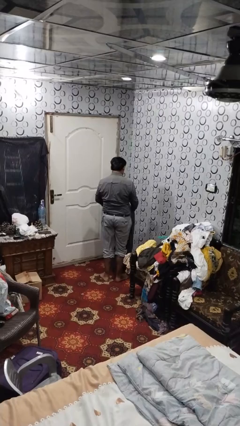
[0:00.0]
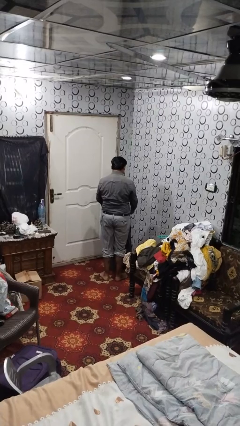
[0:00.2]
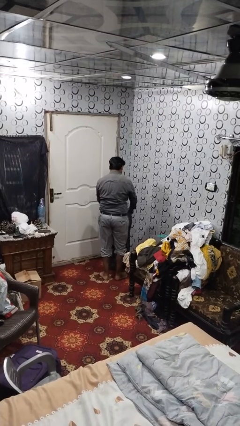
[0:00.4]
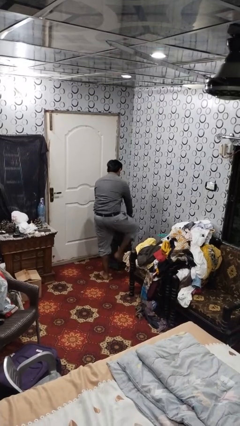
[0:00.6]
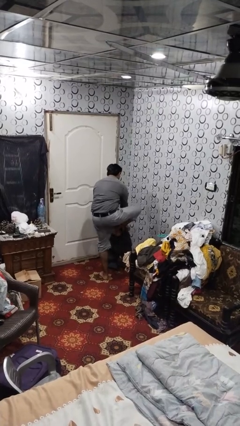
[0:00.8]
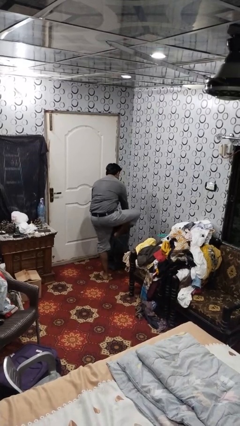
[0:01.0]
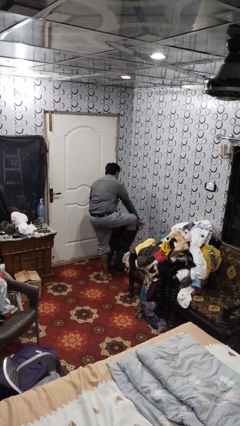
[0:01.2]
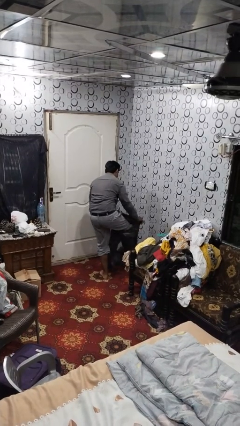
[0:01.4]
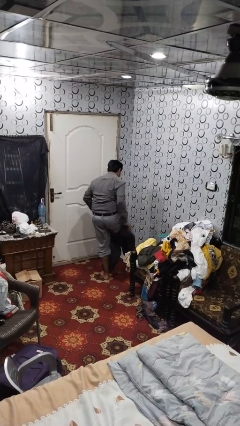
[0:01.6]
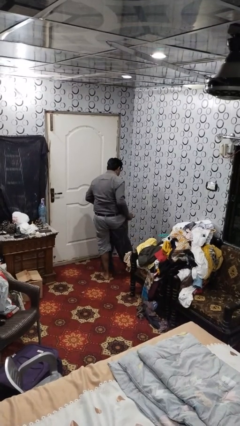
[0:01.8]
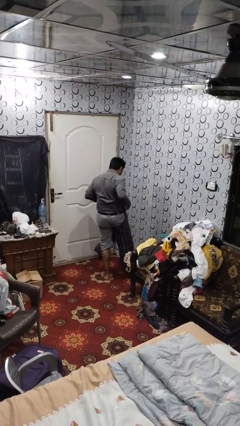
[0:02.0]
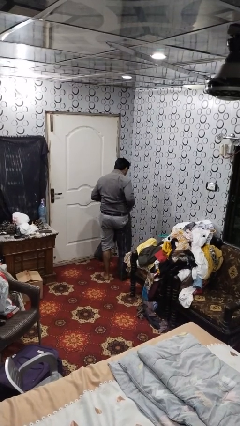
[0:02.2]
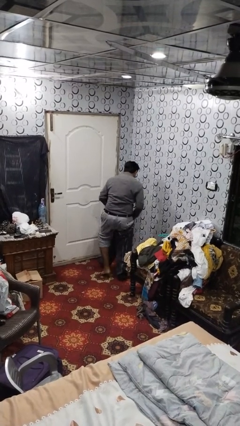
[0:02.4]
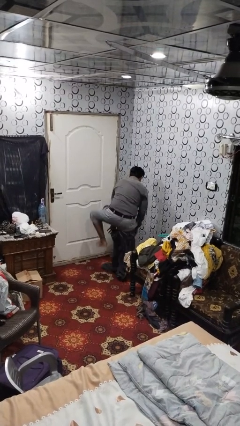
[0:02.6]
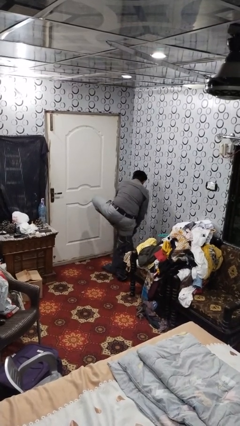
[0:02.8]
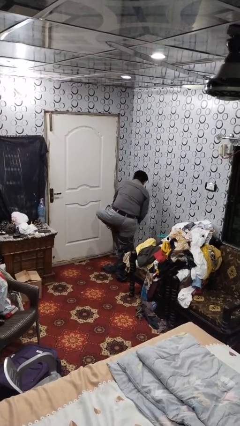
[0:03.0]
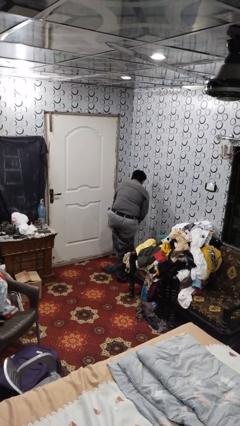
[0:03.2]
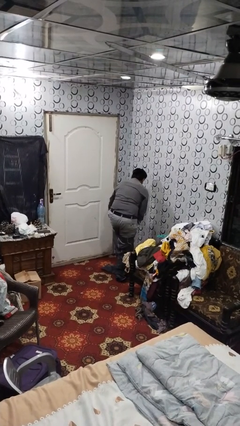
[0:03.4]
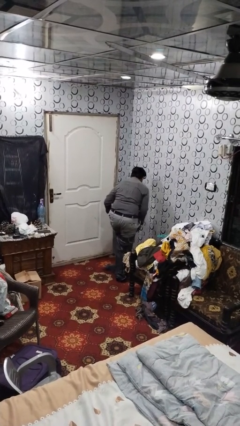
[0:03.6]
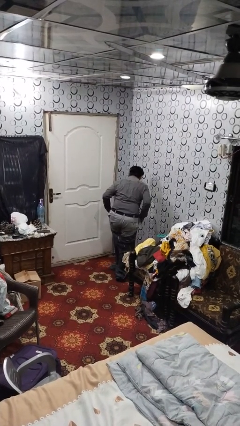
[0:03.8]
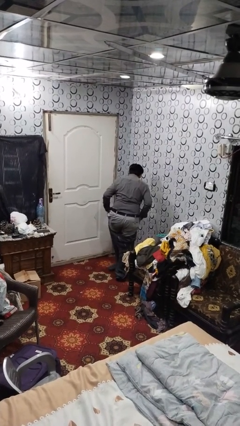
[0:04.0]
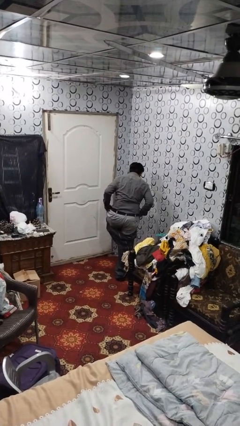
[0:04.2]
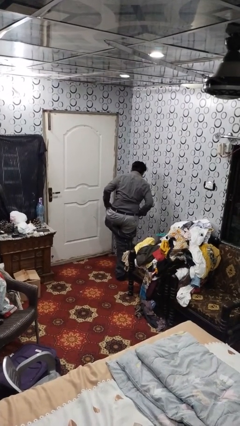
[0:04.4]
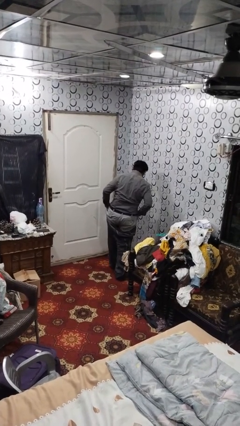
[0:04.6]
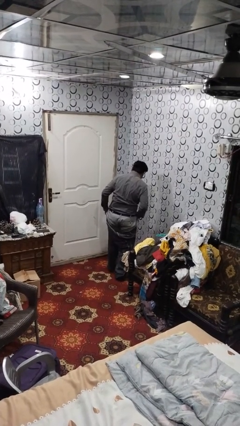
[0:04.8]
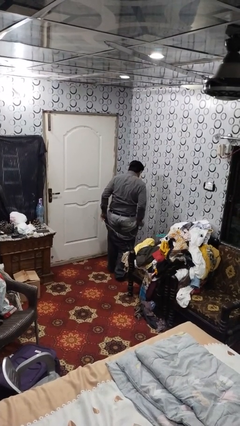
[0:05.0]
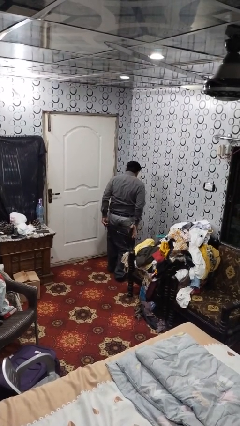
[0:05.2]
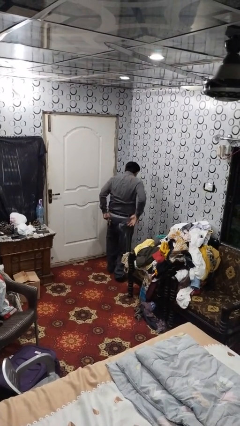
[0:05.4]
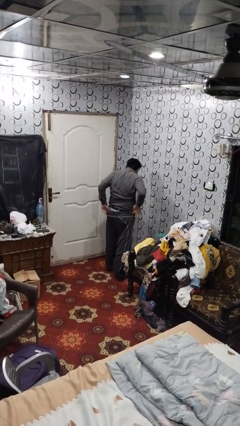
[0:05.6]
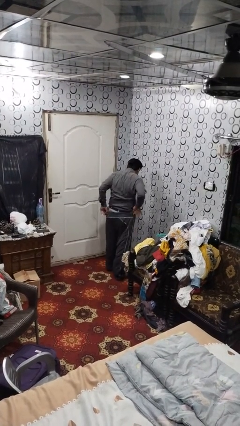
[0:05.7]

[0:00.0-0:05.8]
person puts on pants

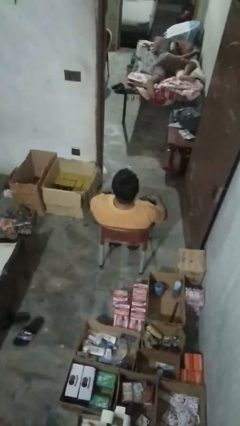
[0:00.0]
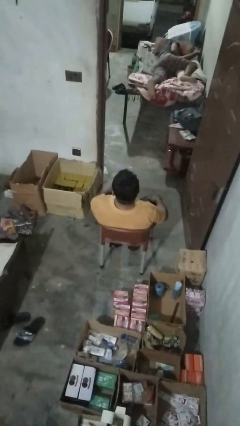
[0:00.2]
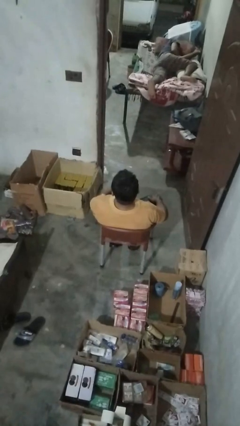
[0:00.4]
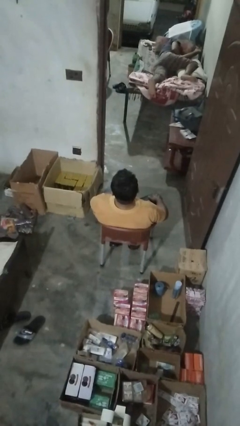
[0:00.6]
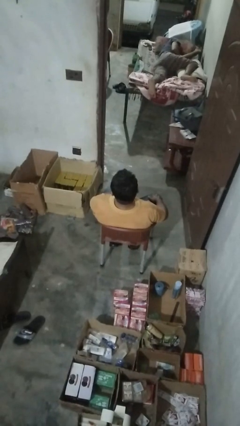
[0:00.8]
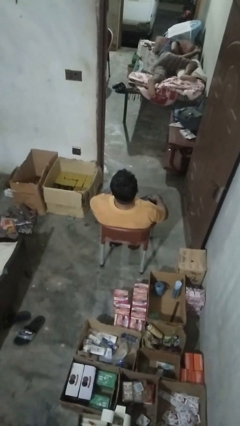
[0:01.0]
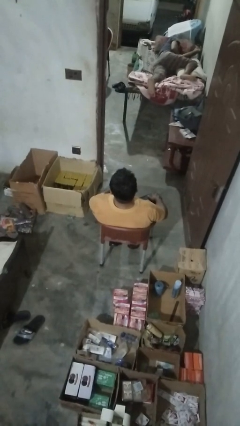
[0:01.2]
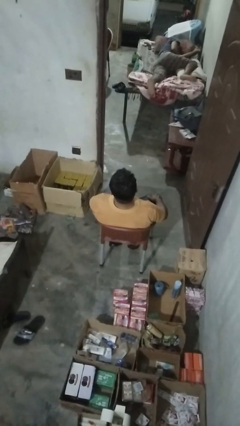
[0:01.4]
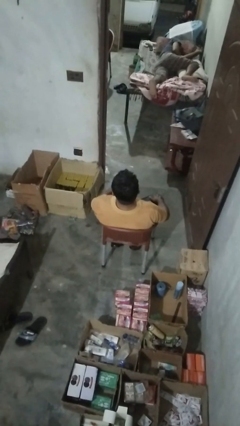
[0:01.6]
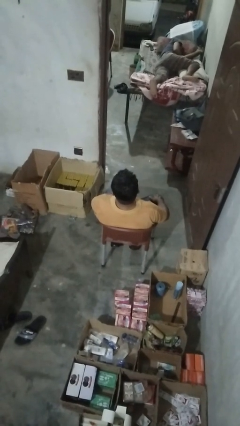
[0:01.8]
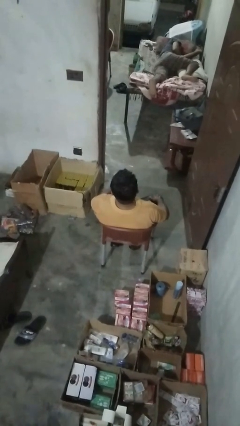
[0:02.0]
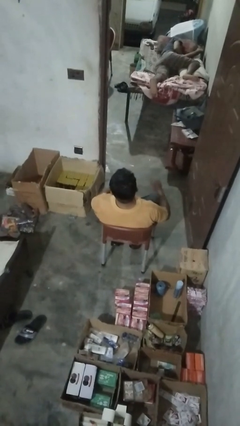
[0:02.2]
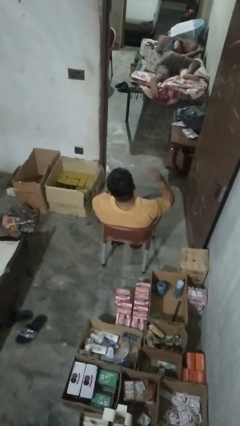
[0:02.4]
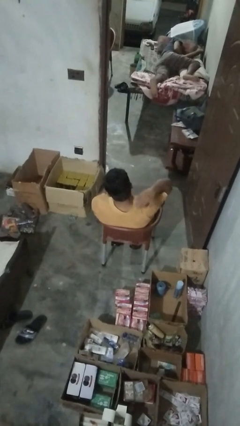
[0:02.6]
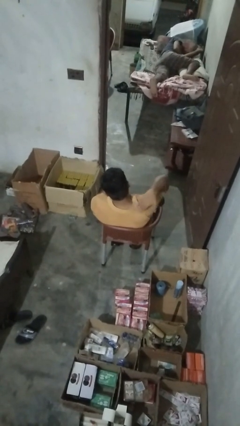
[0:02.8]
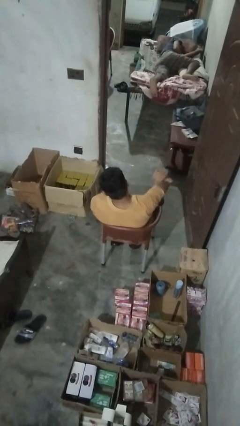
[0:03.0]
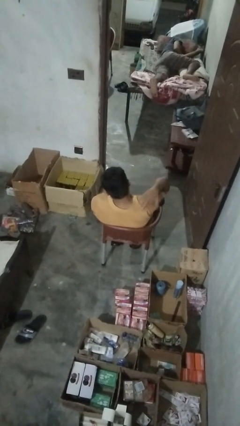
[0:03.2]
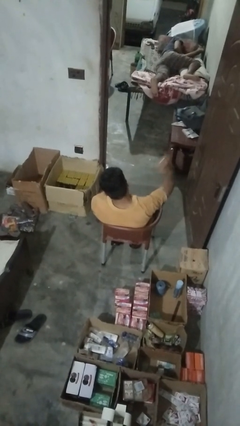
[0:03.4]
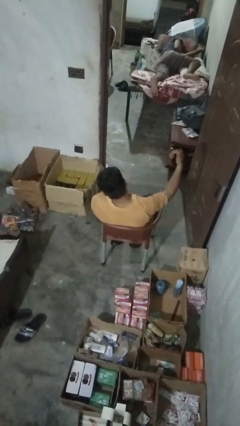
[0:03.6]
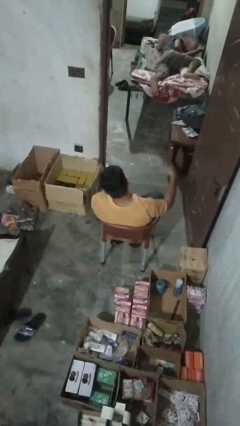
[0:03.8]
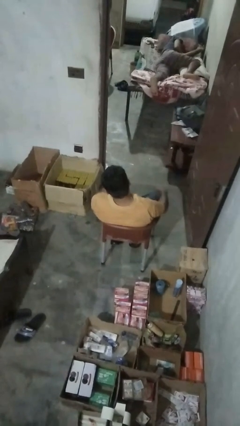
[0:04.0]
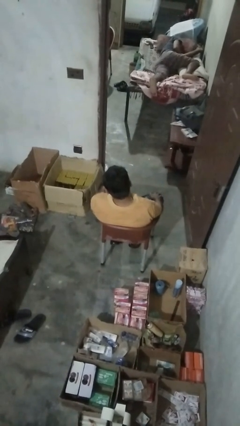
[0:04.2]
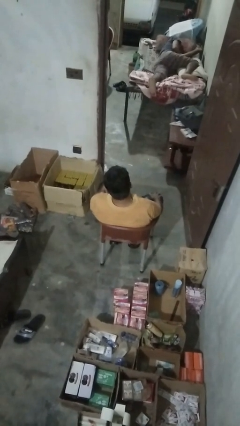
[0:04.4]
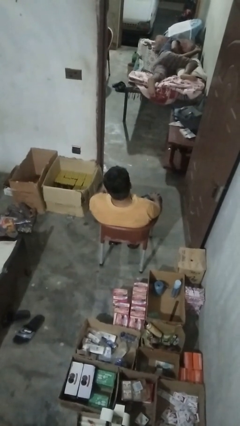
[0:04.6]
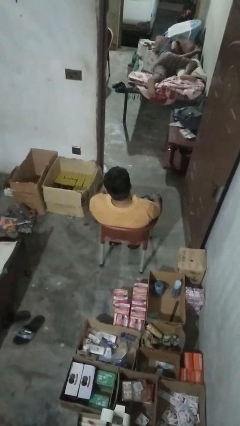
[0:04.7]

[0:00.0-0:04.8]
person swats bug

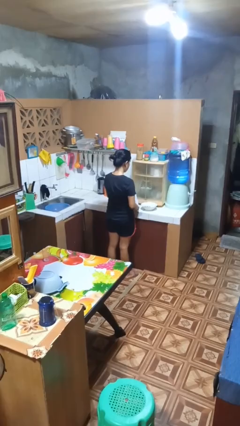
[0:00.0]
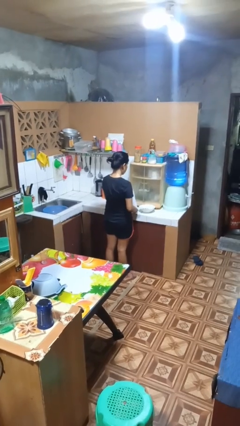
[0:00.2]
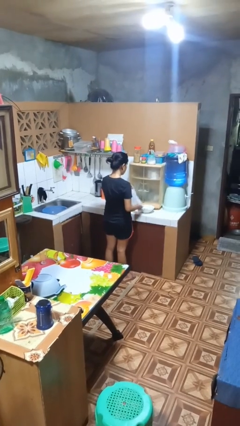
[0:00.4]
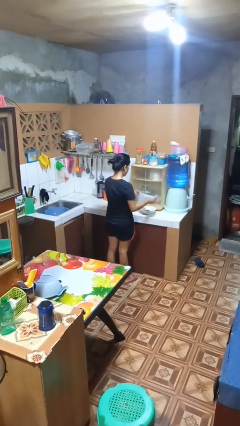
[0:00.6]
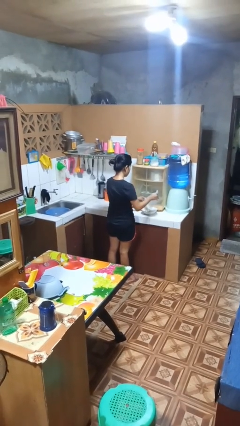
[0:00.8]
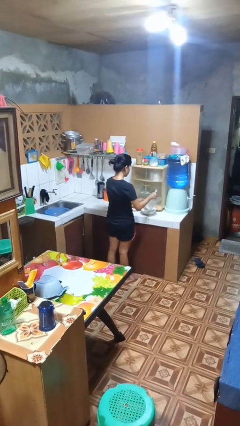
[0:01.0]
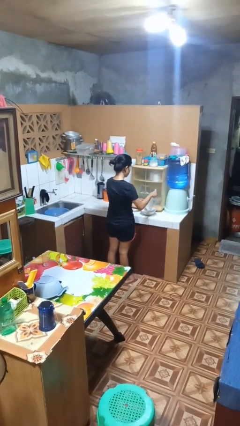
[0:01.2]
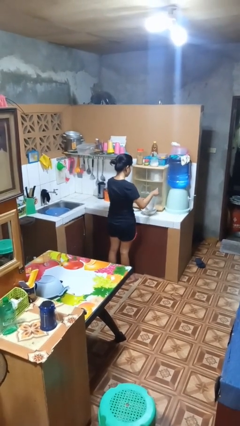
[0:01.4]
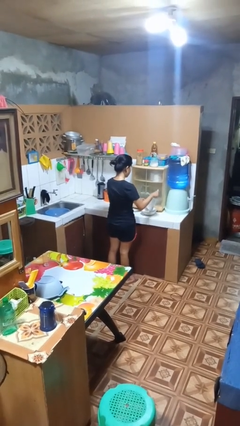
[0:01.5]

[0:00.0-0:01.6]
person pours into bowl

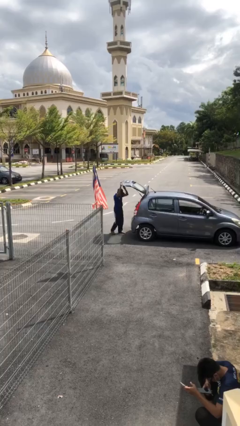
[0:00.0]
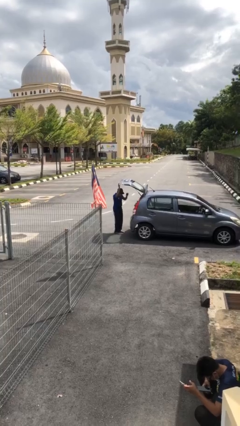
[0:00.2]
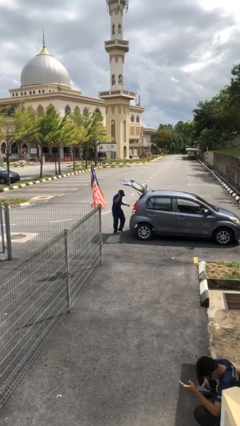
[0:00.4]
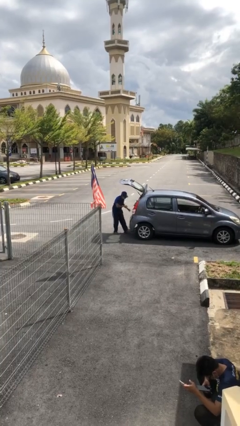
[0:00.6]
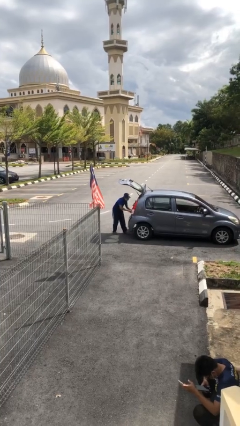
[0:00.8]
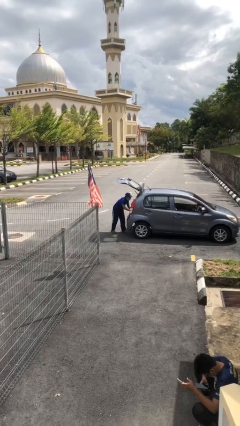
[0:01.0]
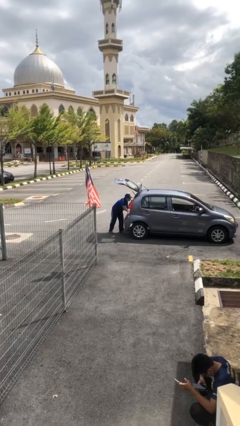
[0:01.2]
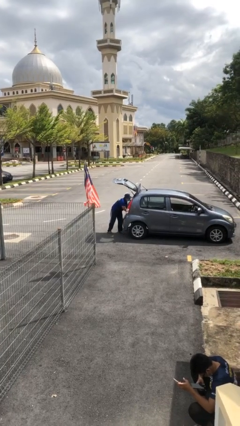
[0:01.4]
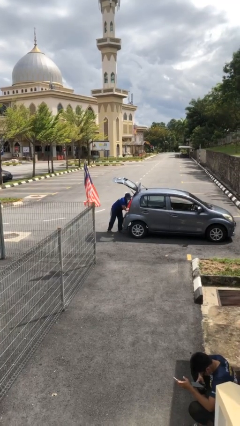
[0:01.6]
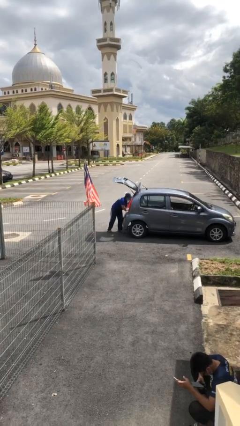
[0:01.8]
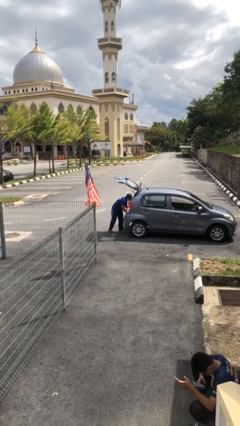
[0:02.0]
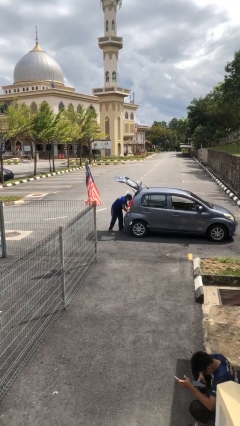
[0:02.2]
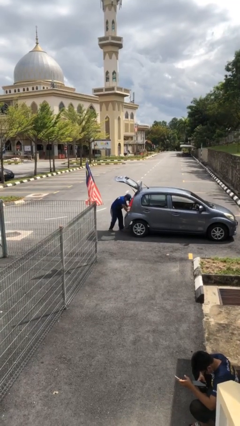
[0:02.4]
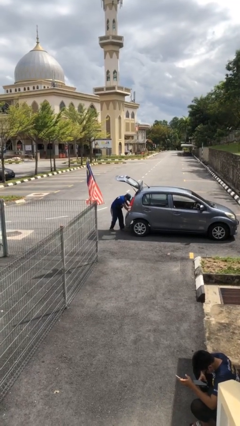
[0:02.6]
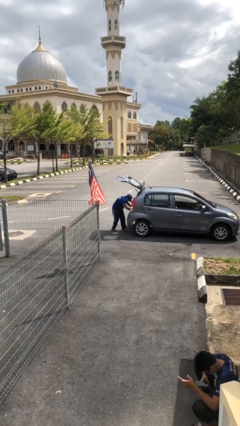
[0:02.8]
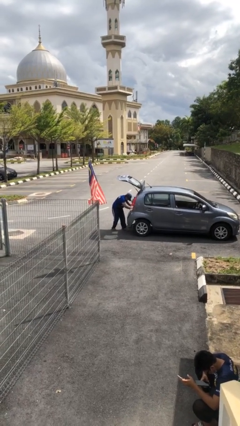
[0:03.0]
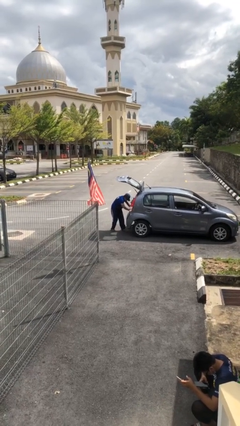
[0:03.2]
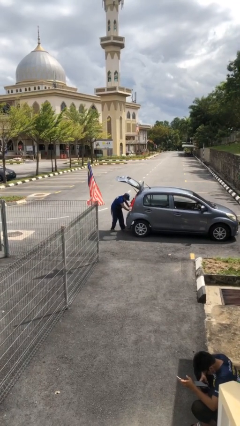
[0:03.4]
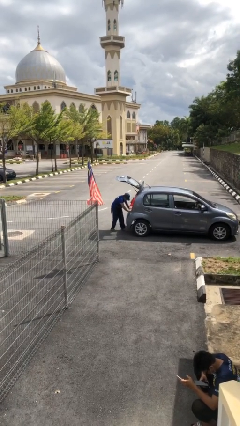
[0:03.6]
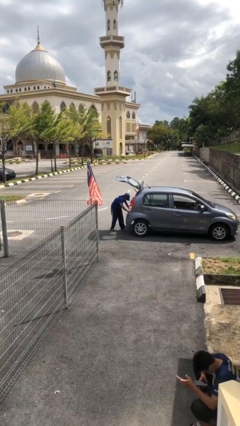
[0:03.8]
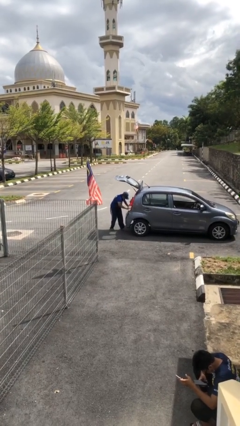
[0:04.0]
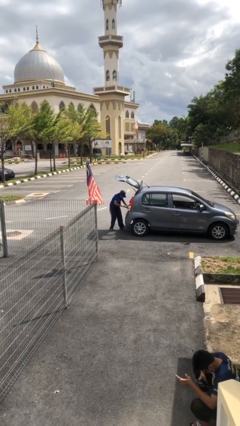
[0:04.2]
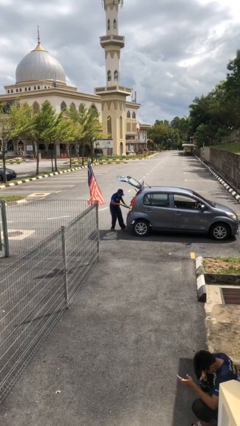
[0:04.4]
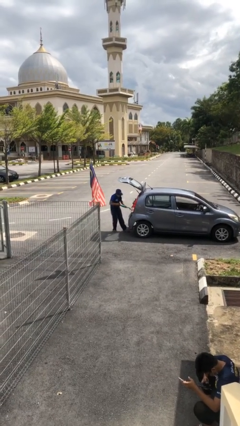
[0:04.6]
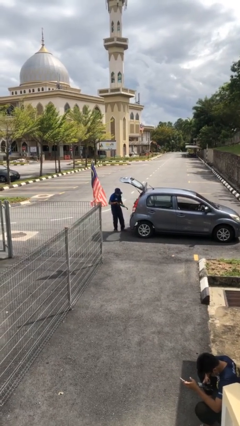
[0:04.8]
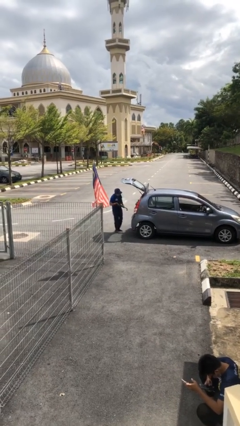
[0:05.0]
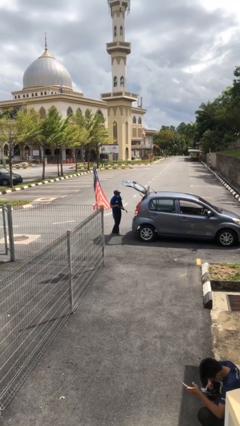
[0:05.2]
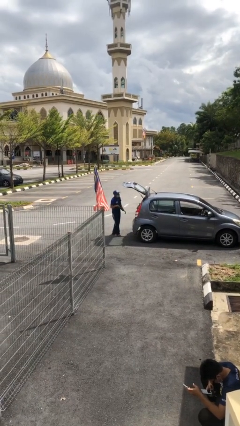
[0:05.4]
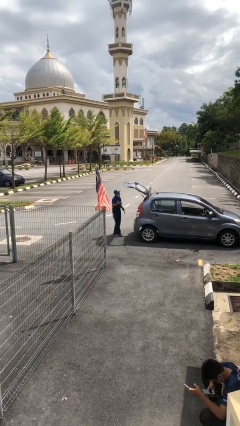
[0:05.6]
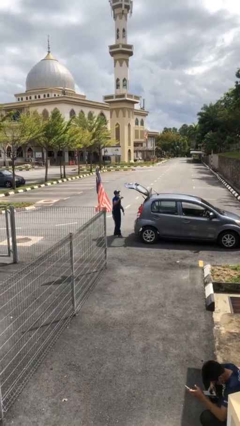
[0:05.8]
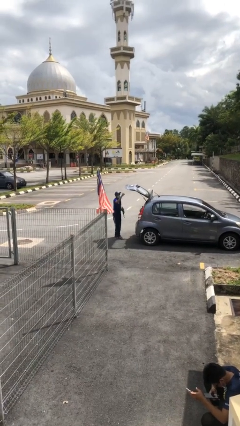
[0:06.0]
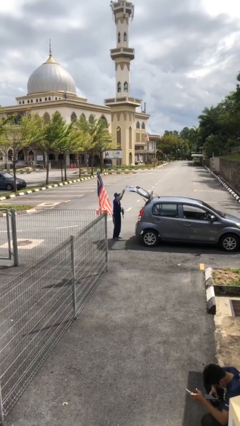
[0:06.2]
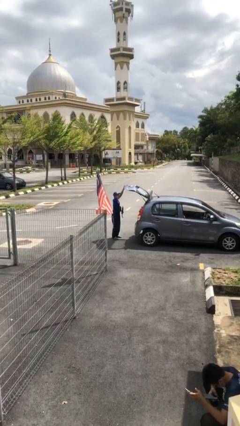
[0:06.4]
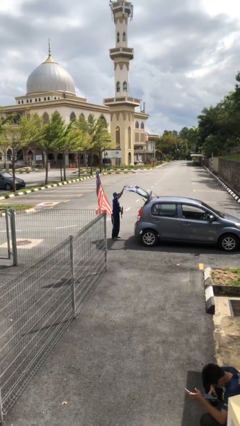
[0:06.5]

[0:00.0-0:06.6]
person unloads car
